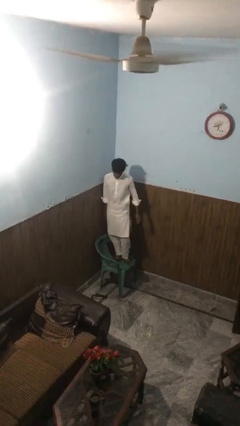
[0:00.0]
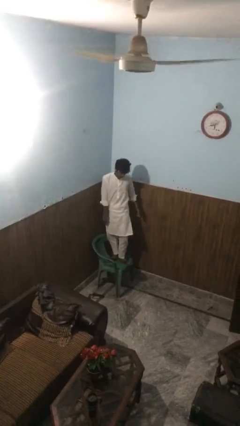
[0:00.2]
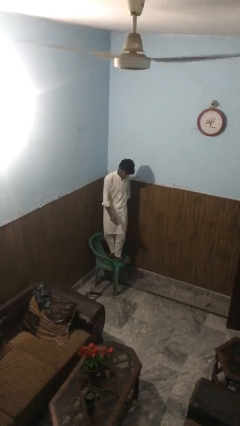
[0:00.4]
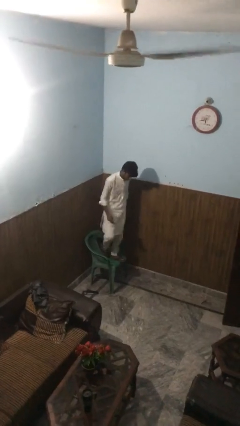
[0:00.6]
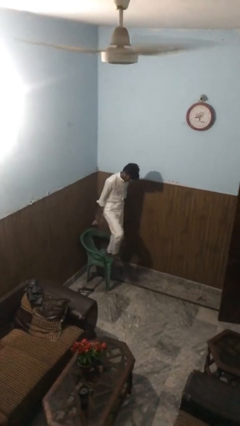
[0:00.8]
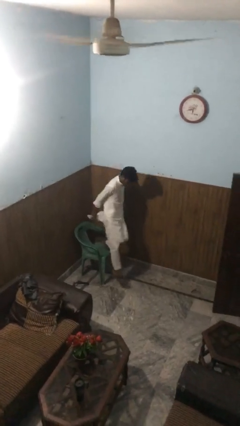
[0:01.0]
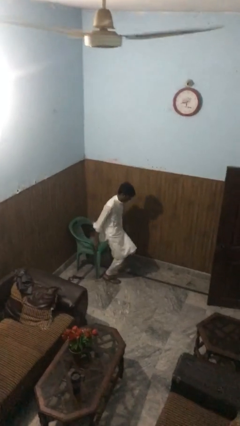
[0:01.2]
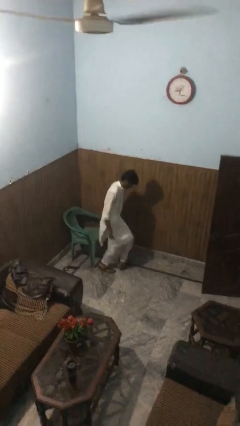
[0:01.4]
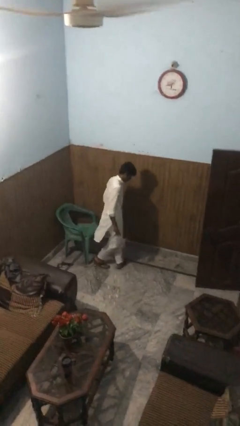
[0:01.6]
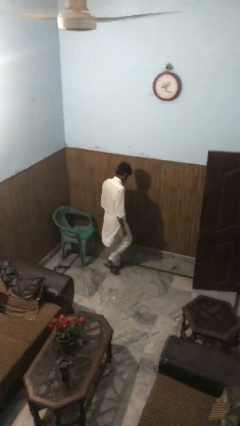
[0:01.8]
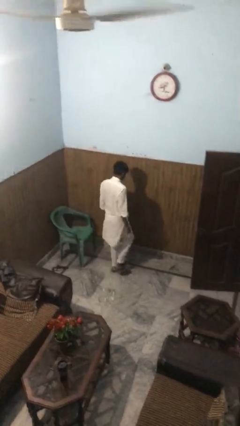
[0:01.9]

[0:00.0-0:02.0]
person climbs off chair

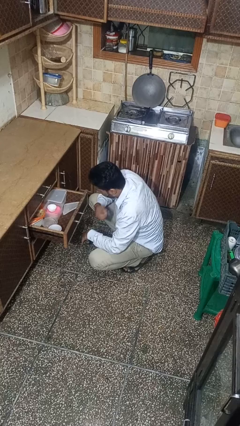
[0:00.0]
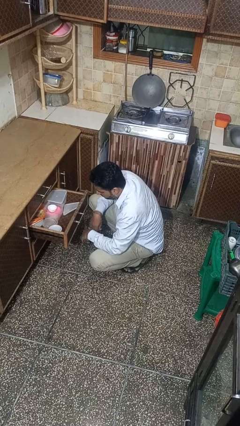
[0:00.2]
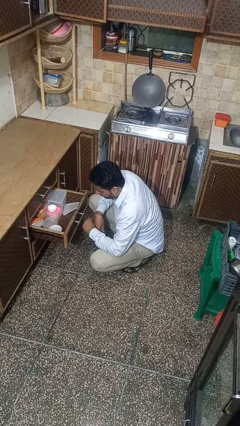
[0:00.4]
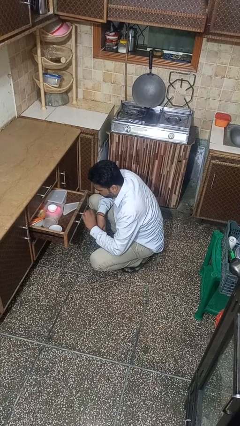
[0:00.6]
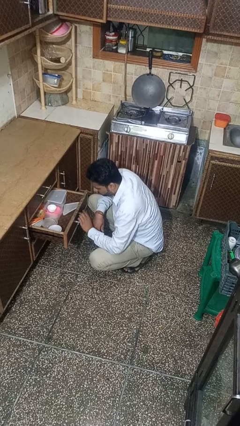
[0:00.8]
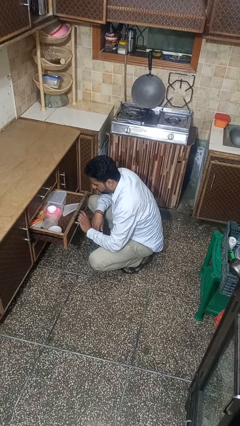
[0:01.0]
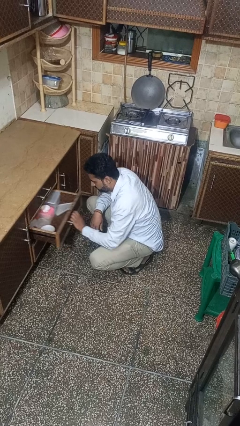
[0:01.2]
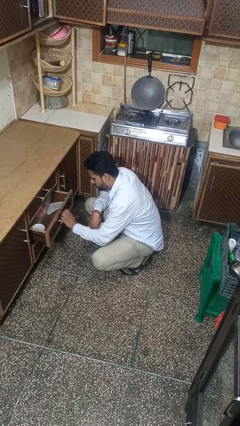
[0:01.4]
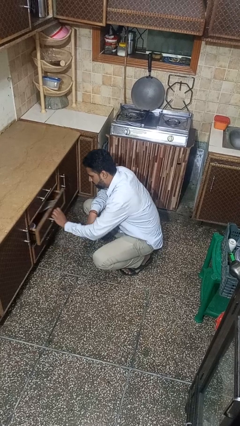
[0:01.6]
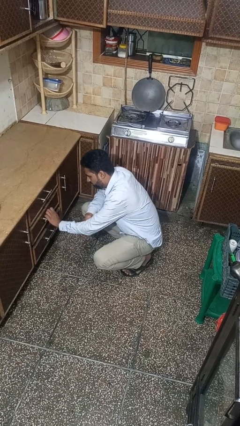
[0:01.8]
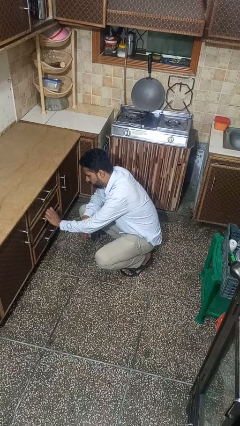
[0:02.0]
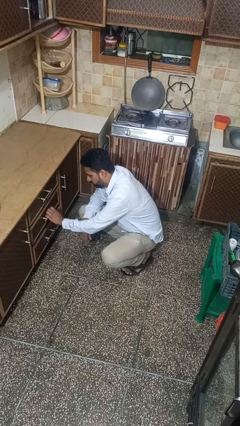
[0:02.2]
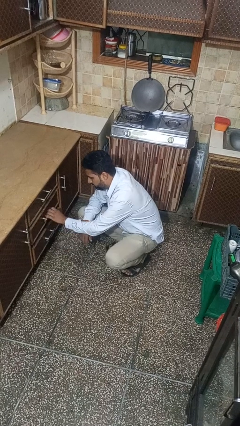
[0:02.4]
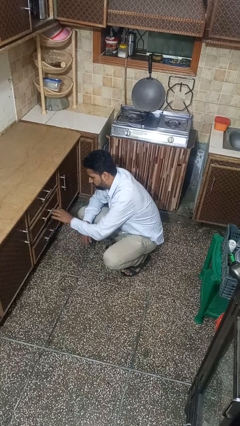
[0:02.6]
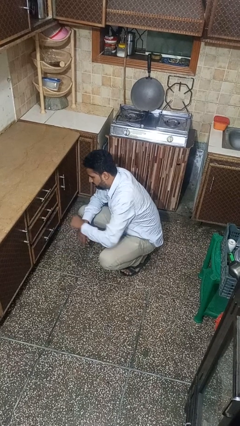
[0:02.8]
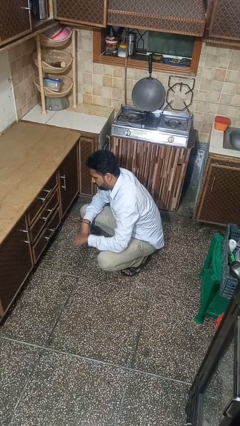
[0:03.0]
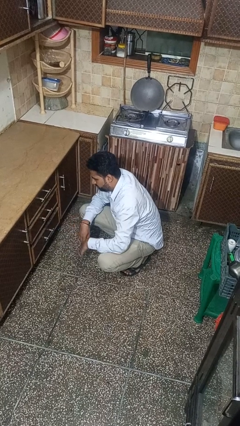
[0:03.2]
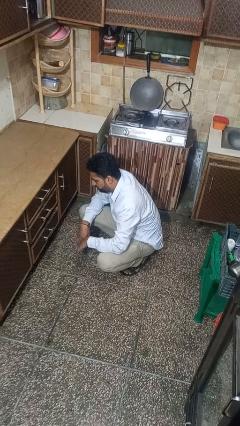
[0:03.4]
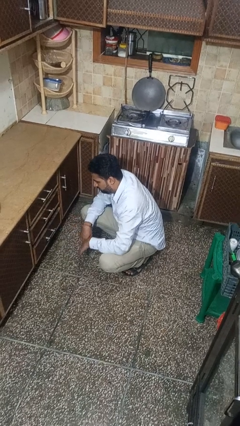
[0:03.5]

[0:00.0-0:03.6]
person closes kitchen drawer

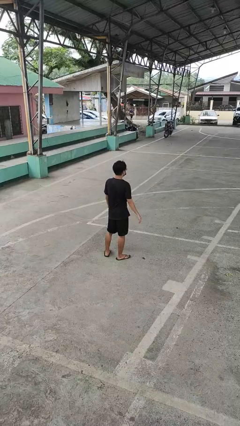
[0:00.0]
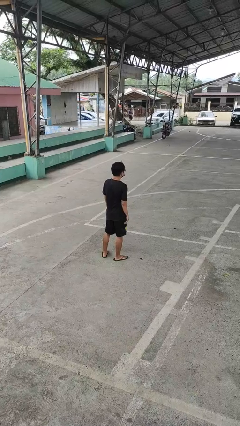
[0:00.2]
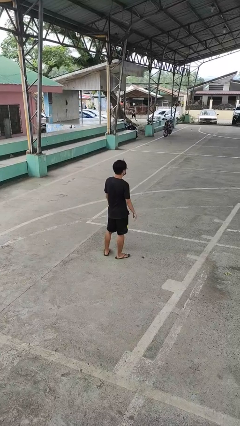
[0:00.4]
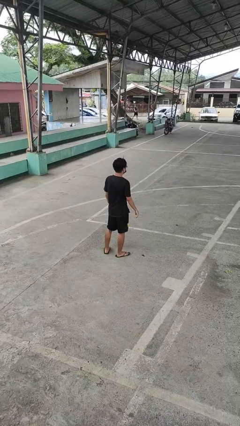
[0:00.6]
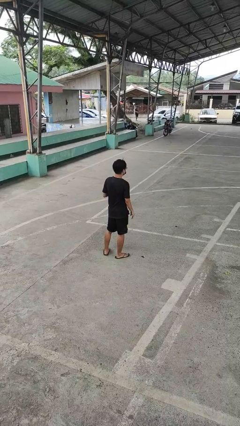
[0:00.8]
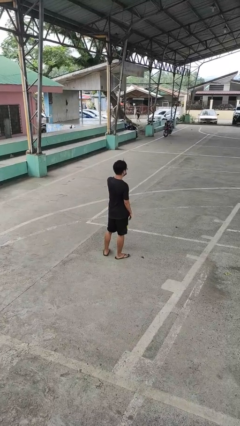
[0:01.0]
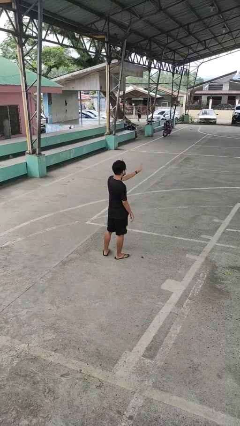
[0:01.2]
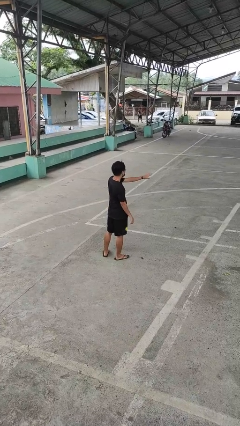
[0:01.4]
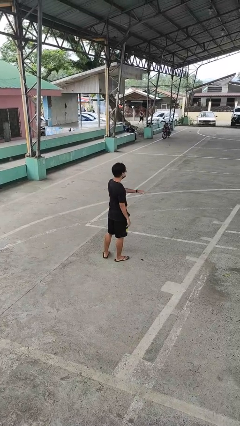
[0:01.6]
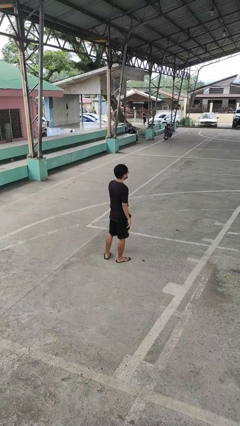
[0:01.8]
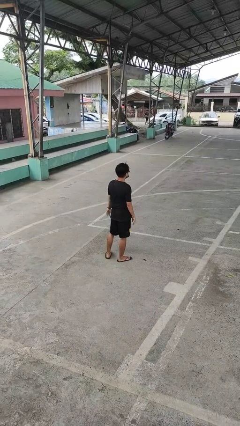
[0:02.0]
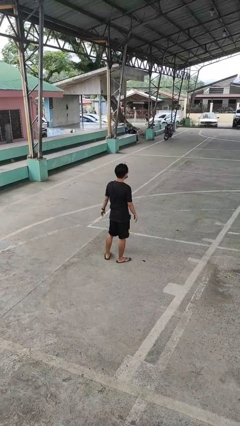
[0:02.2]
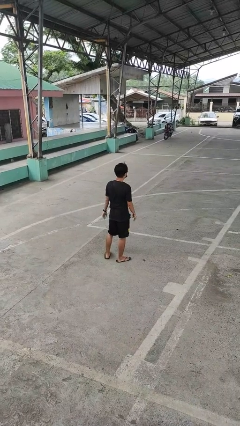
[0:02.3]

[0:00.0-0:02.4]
person gestures swipe right

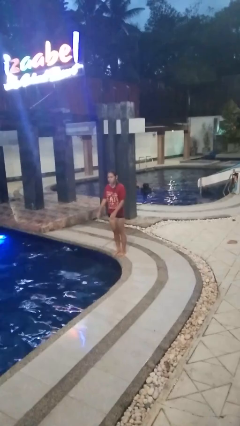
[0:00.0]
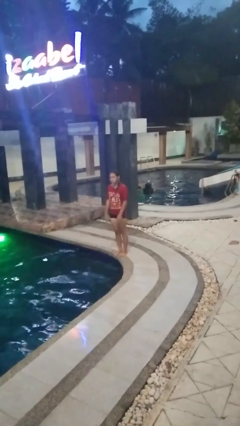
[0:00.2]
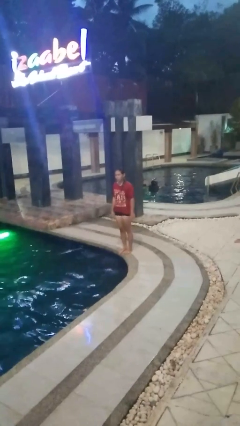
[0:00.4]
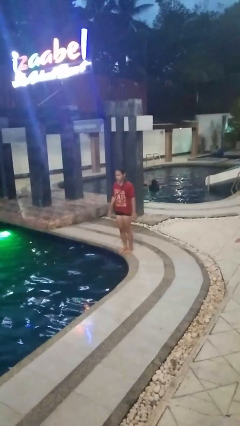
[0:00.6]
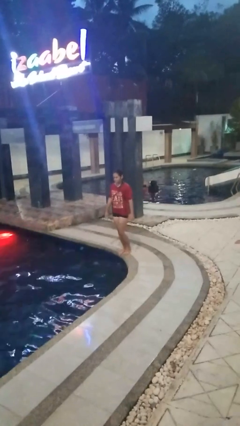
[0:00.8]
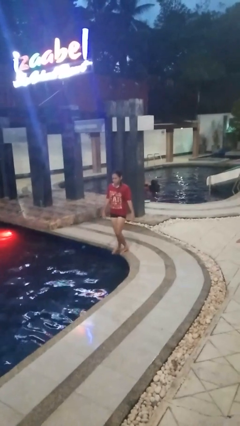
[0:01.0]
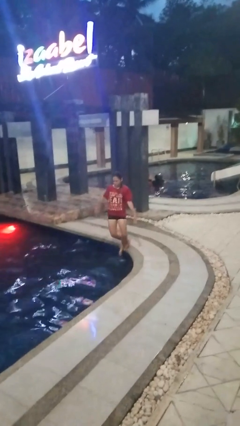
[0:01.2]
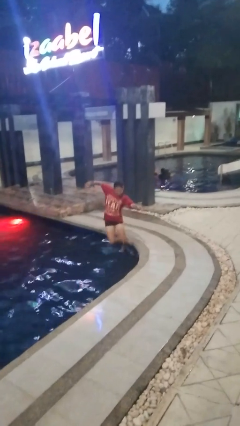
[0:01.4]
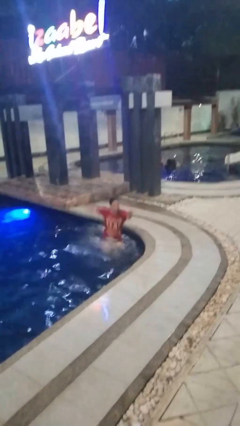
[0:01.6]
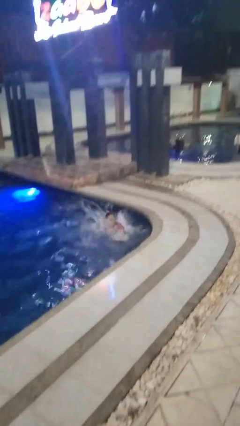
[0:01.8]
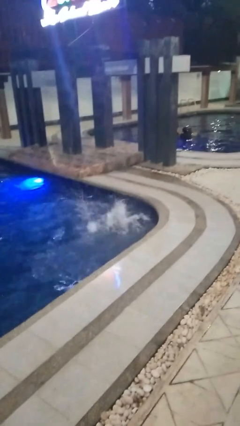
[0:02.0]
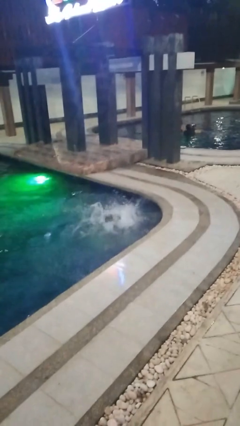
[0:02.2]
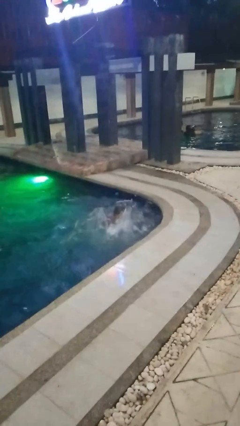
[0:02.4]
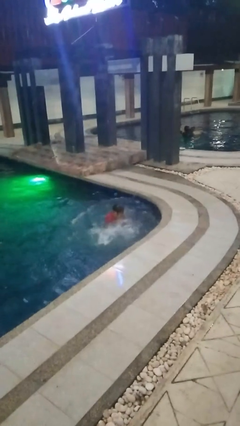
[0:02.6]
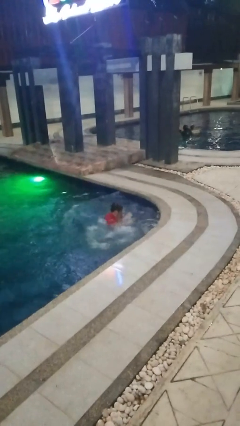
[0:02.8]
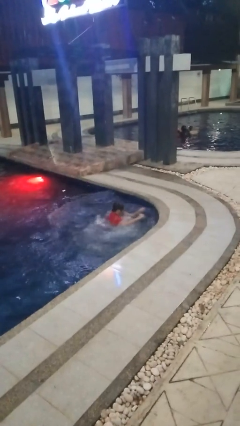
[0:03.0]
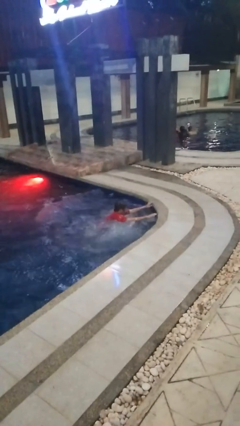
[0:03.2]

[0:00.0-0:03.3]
person falls into pool

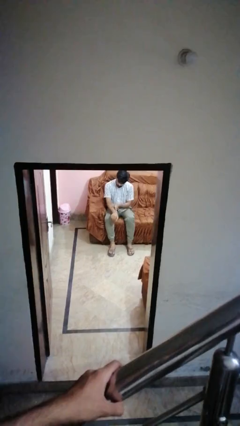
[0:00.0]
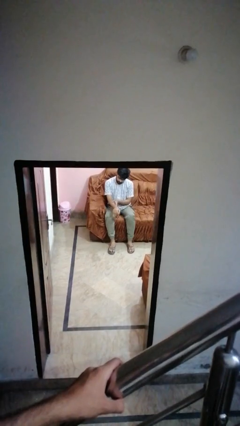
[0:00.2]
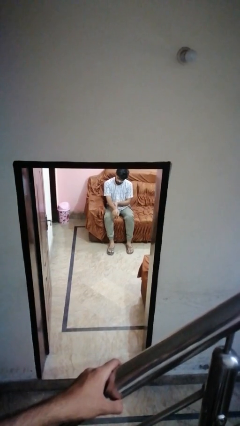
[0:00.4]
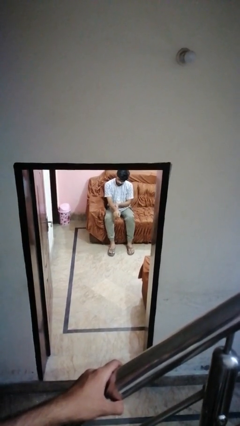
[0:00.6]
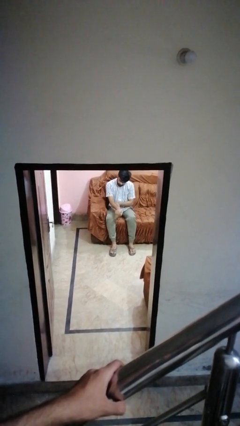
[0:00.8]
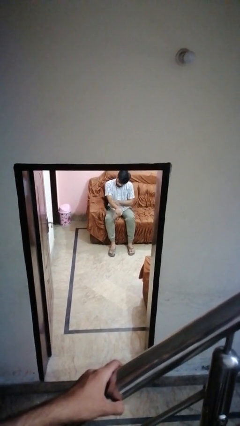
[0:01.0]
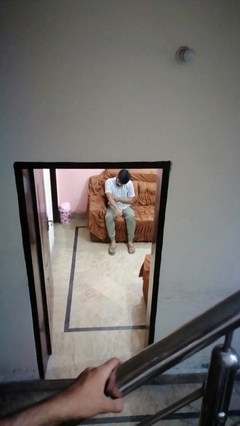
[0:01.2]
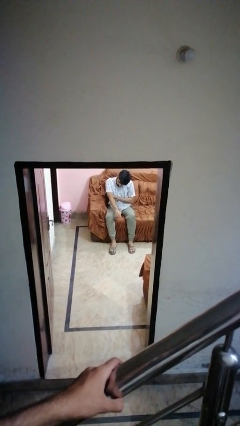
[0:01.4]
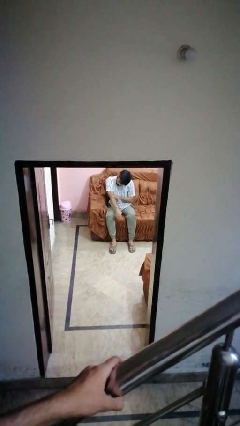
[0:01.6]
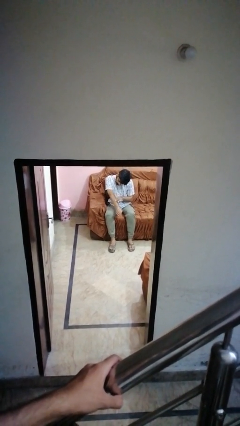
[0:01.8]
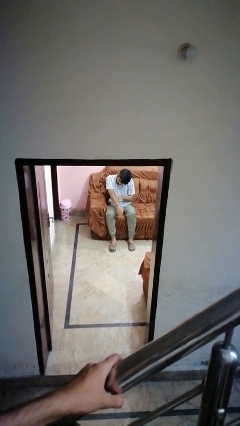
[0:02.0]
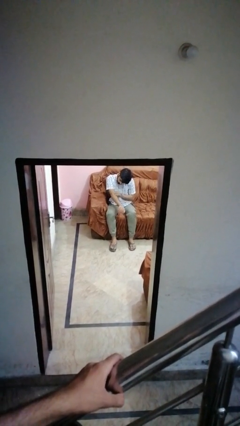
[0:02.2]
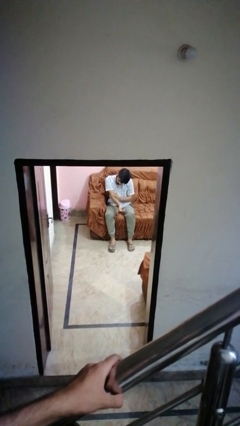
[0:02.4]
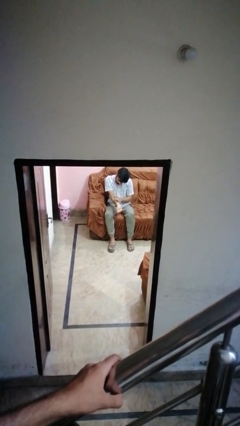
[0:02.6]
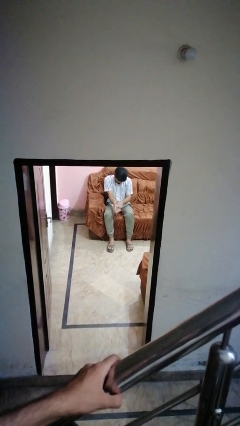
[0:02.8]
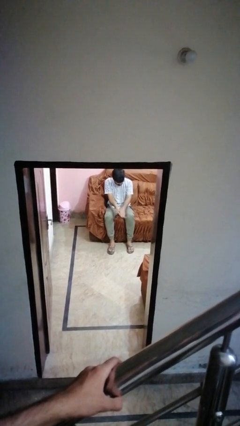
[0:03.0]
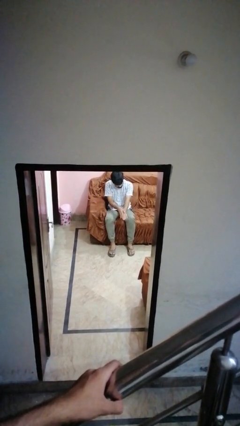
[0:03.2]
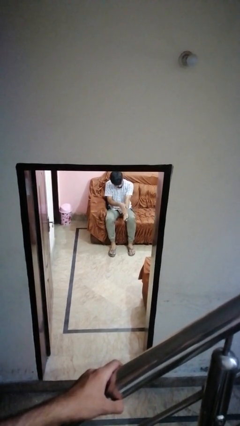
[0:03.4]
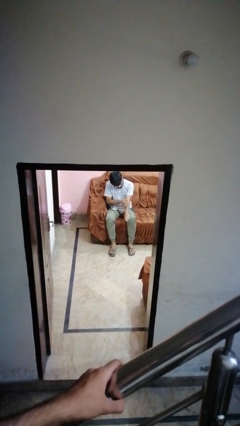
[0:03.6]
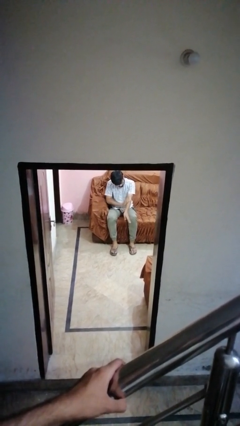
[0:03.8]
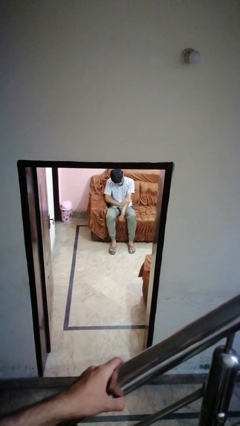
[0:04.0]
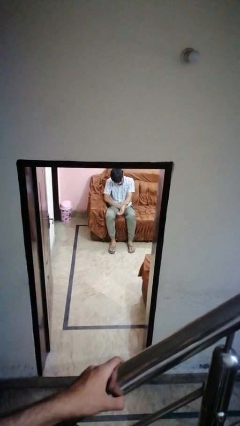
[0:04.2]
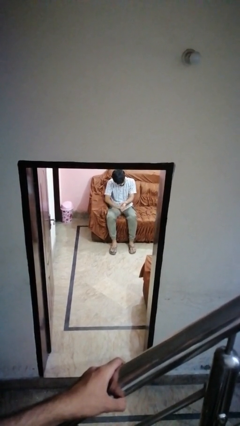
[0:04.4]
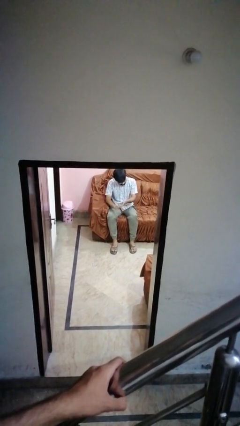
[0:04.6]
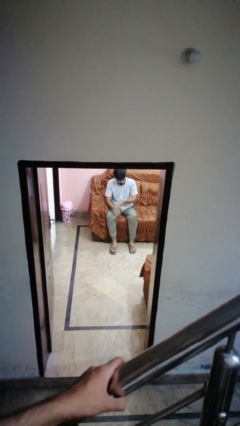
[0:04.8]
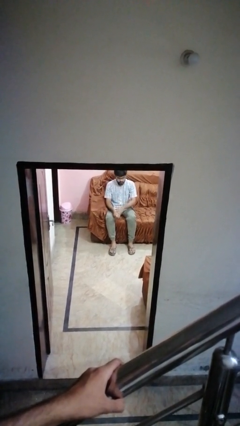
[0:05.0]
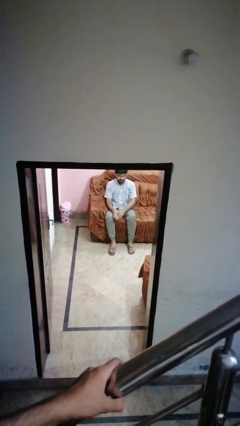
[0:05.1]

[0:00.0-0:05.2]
person looks at hands in lap

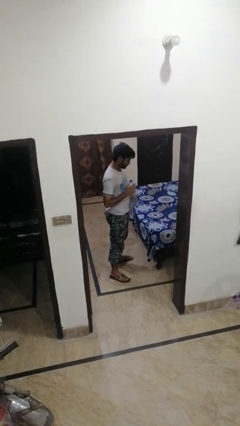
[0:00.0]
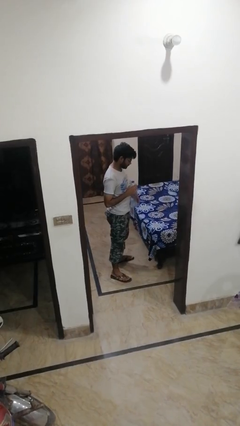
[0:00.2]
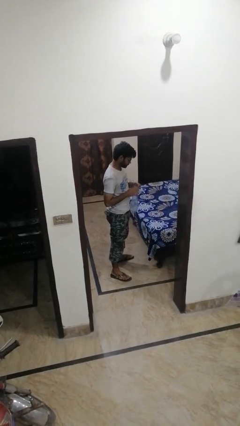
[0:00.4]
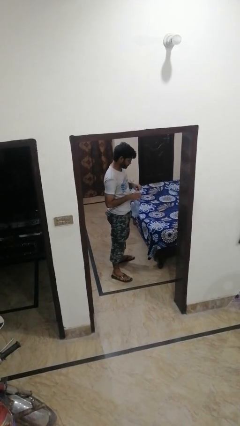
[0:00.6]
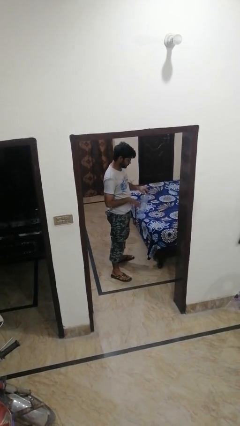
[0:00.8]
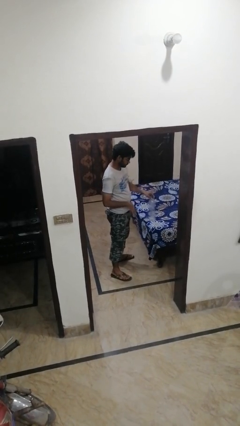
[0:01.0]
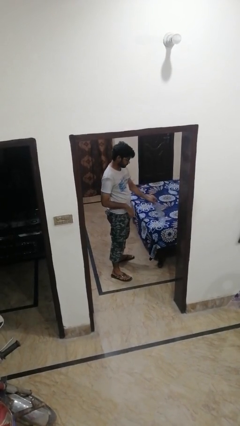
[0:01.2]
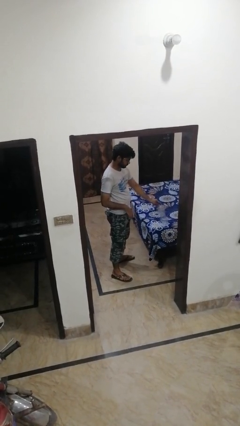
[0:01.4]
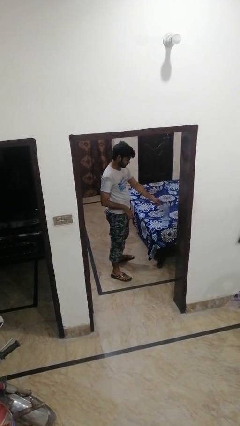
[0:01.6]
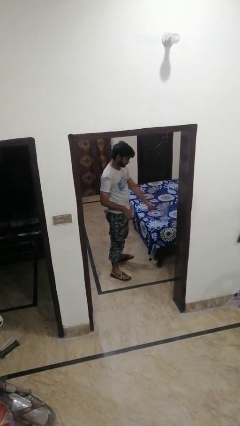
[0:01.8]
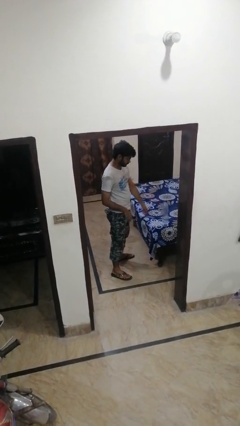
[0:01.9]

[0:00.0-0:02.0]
person puts down object on bed
